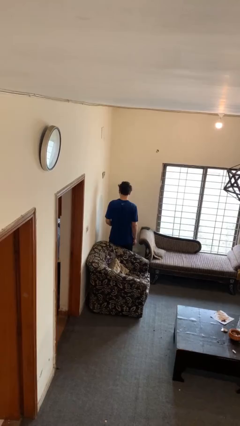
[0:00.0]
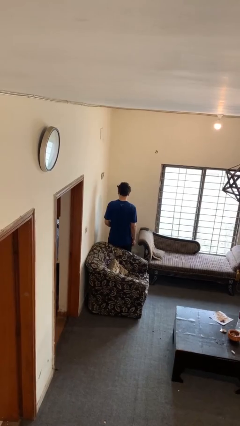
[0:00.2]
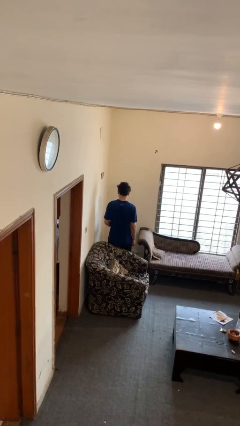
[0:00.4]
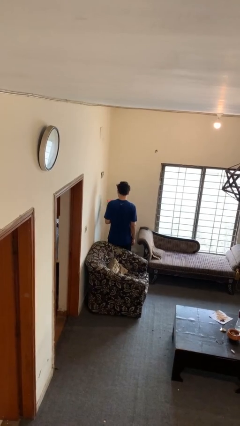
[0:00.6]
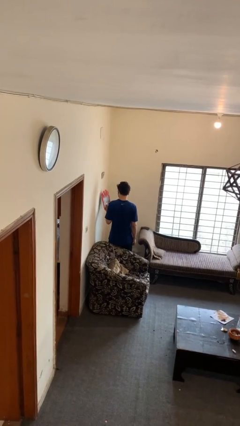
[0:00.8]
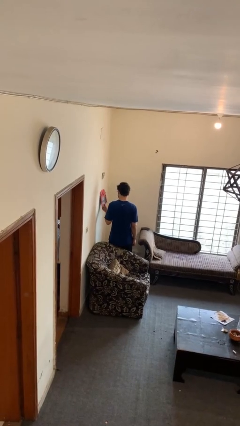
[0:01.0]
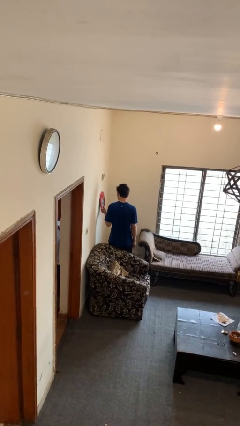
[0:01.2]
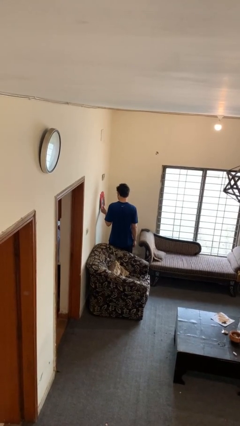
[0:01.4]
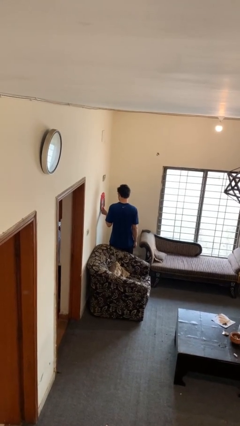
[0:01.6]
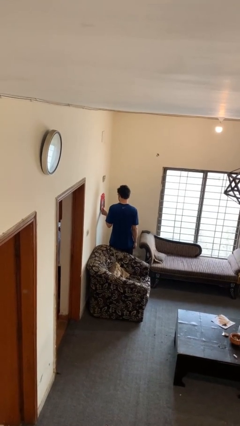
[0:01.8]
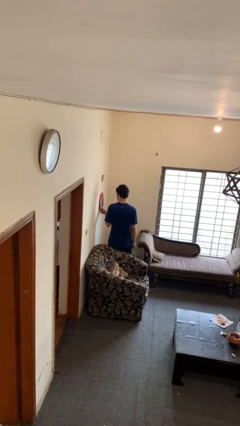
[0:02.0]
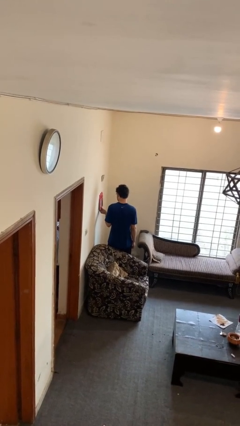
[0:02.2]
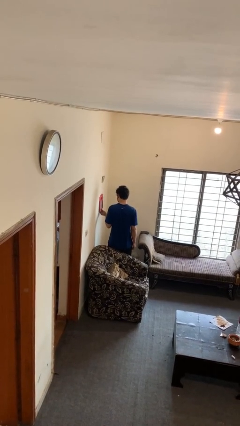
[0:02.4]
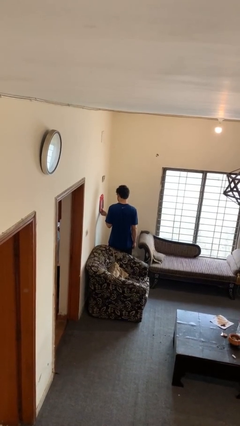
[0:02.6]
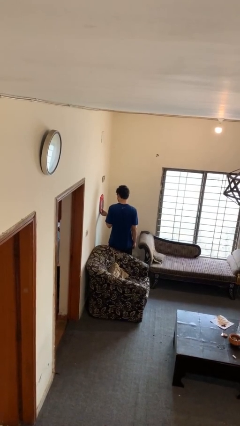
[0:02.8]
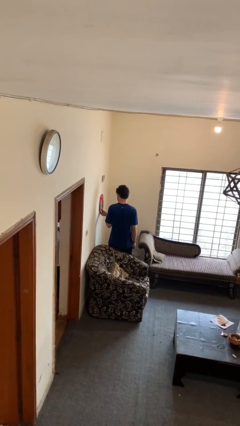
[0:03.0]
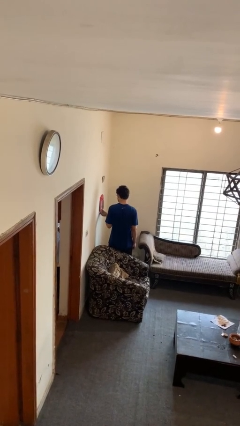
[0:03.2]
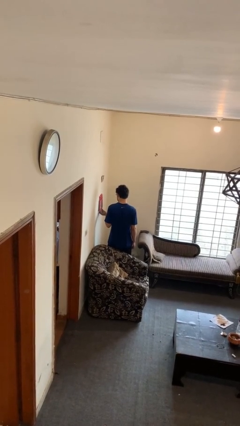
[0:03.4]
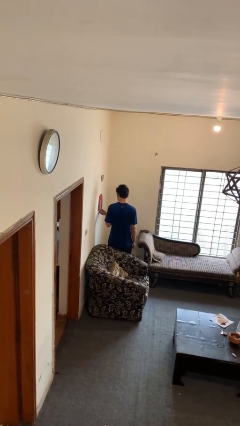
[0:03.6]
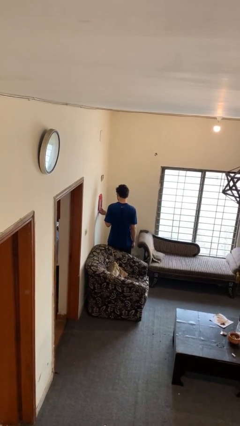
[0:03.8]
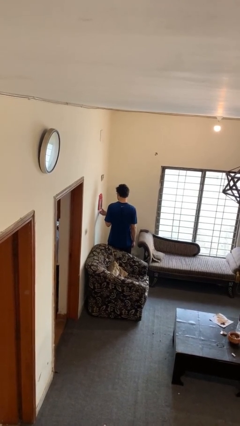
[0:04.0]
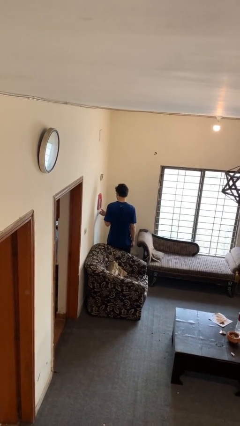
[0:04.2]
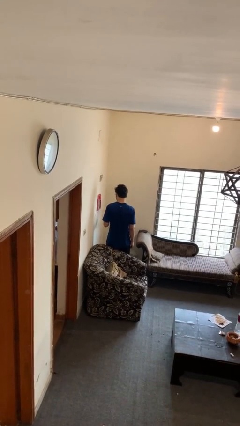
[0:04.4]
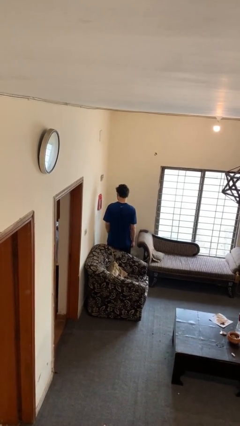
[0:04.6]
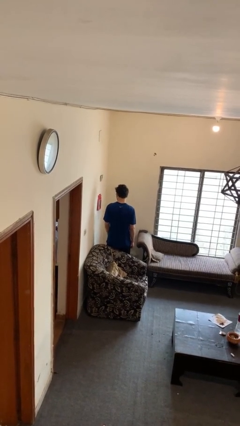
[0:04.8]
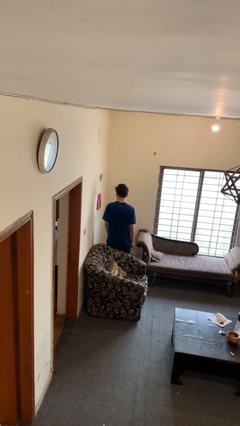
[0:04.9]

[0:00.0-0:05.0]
person puts up picture frame

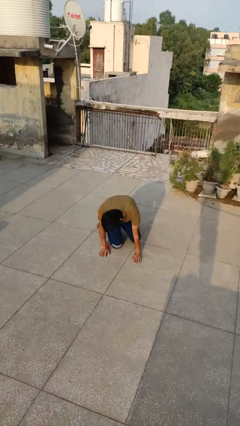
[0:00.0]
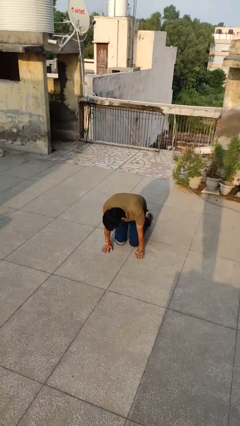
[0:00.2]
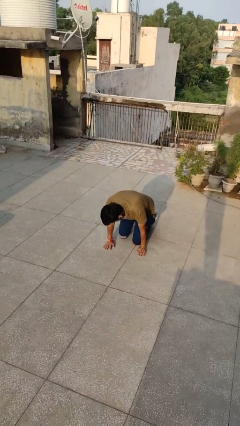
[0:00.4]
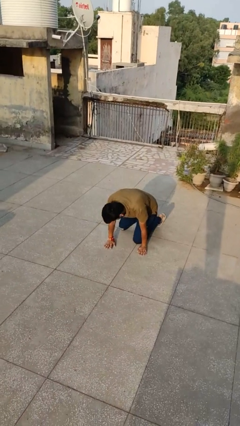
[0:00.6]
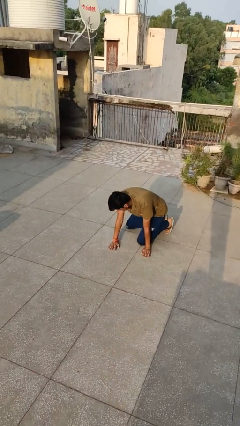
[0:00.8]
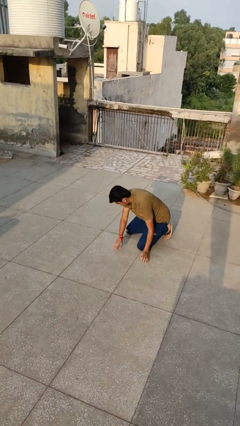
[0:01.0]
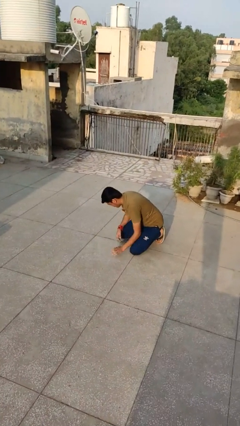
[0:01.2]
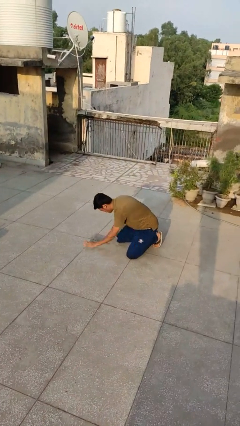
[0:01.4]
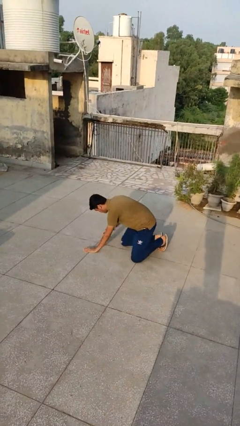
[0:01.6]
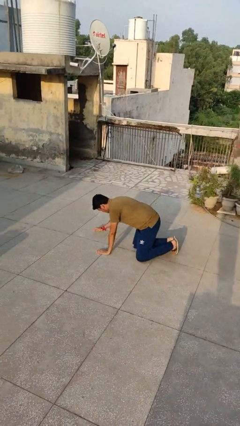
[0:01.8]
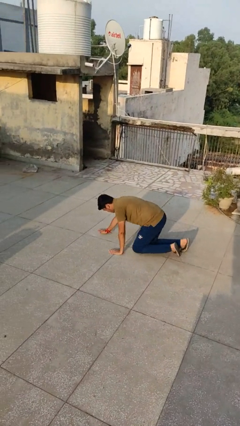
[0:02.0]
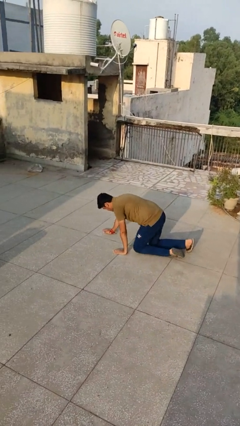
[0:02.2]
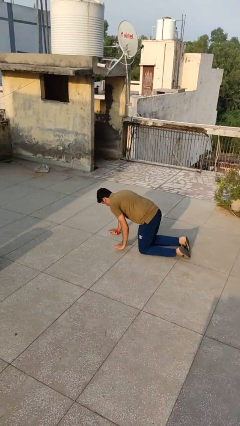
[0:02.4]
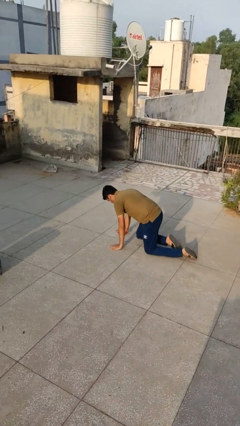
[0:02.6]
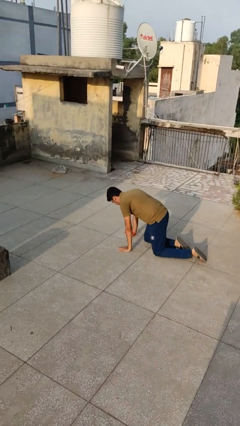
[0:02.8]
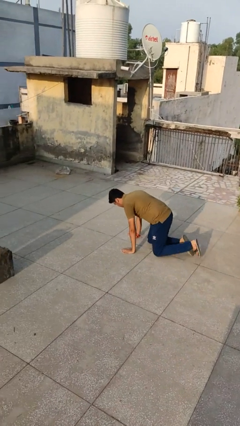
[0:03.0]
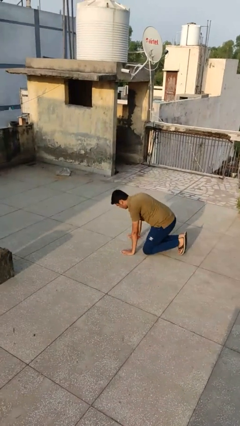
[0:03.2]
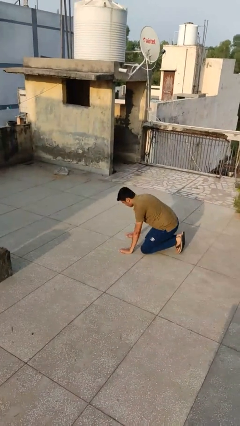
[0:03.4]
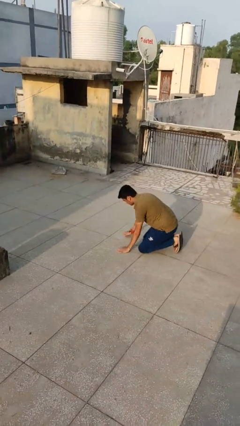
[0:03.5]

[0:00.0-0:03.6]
person crawls

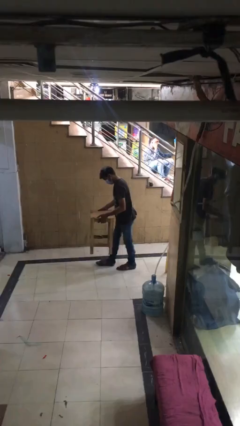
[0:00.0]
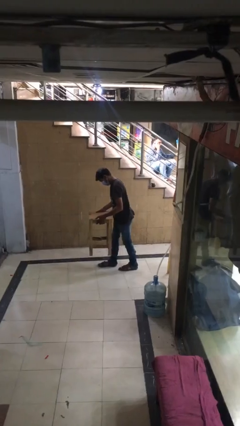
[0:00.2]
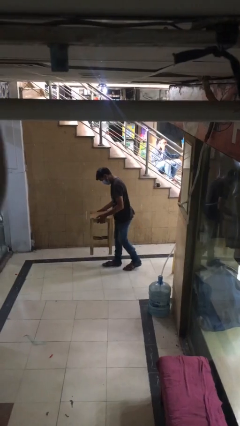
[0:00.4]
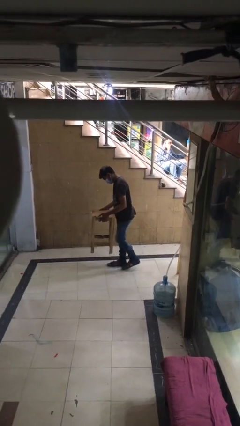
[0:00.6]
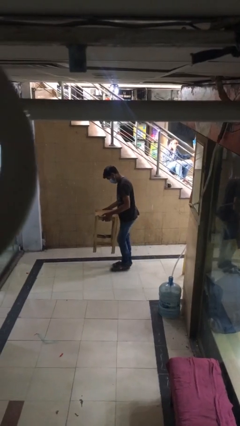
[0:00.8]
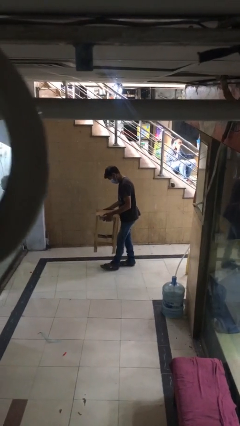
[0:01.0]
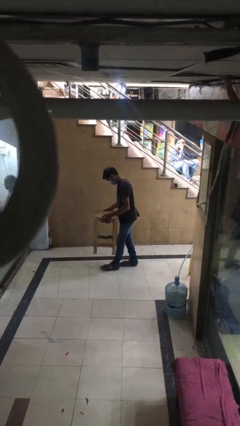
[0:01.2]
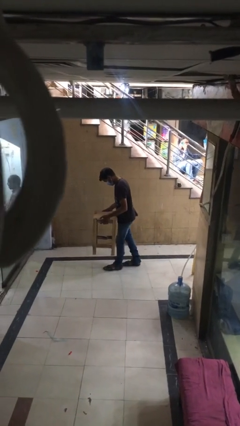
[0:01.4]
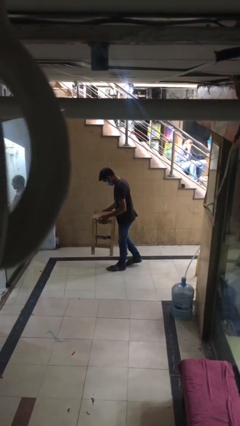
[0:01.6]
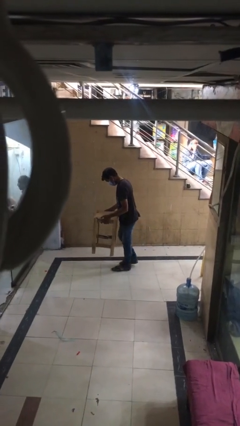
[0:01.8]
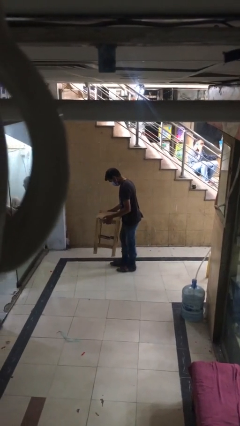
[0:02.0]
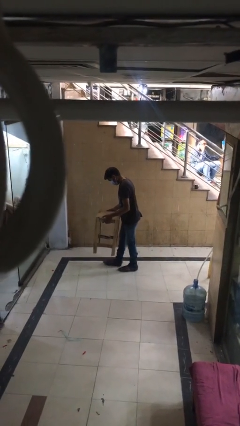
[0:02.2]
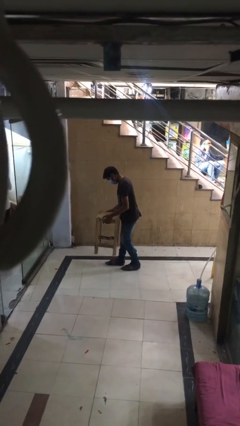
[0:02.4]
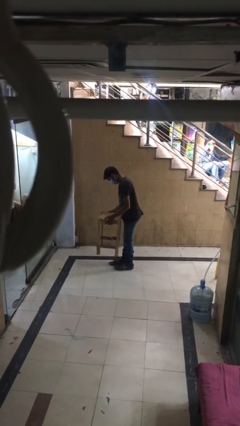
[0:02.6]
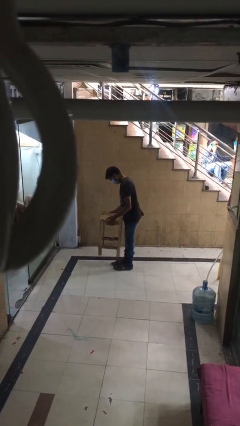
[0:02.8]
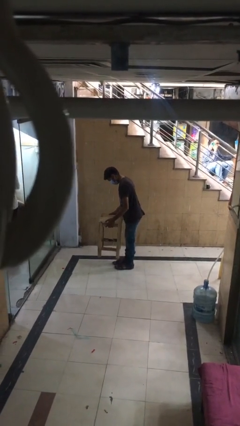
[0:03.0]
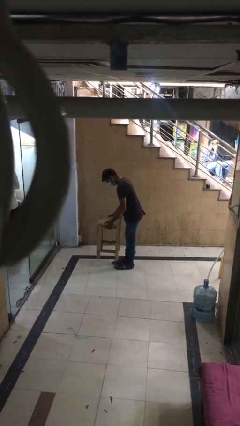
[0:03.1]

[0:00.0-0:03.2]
person carries heavy object

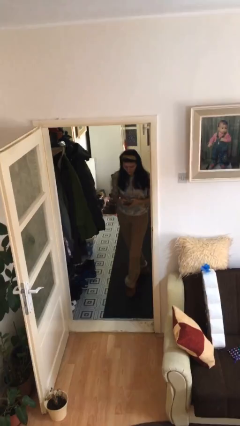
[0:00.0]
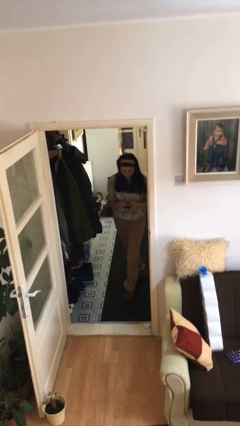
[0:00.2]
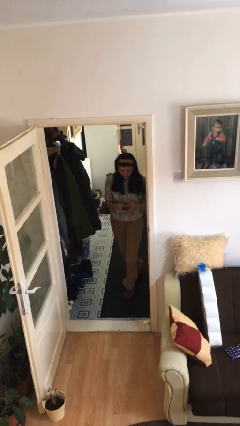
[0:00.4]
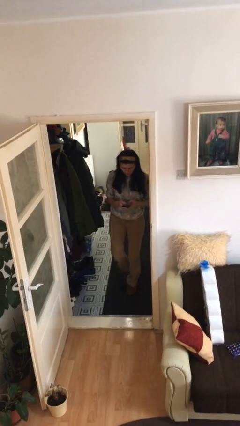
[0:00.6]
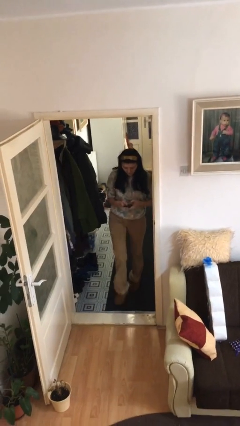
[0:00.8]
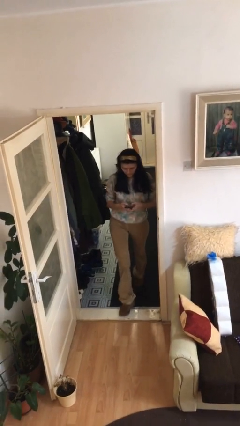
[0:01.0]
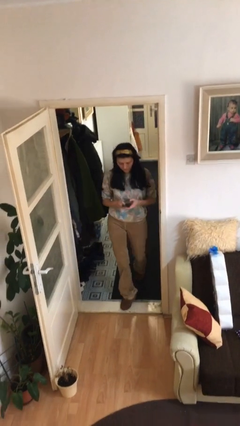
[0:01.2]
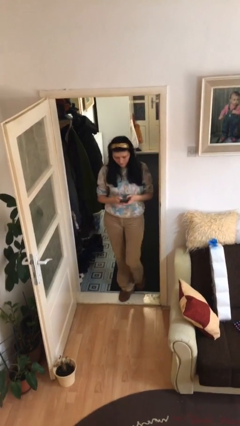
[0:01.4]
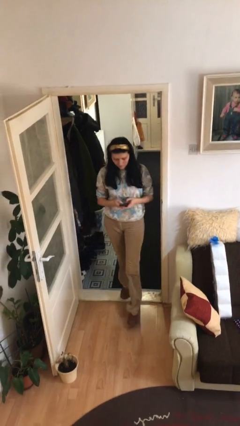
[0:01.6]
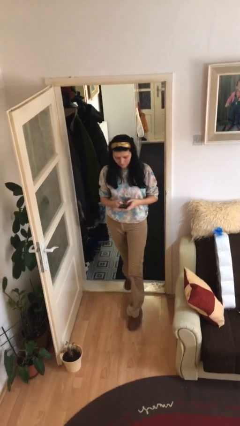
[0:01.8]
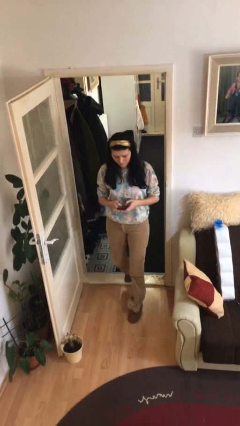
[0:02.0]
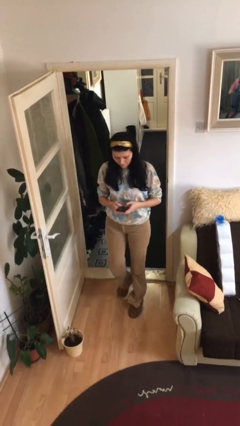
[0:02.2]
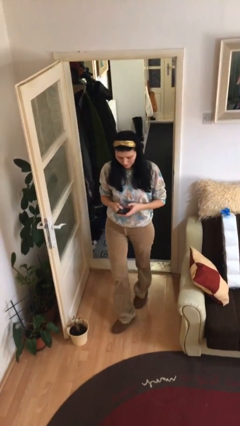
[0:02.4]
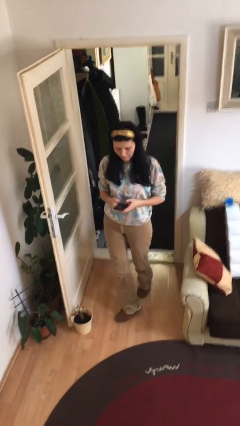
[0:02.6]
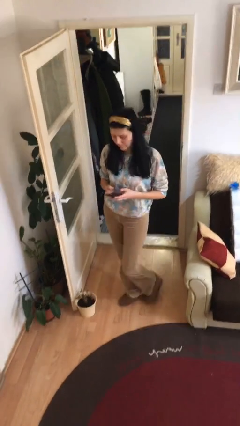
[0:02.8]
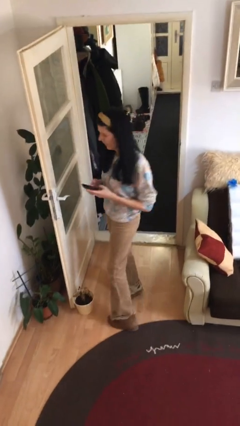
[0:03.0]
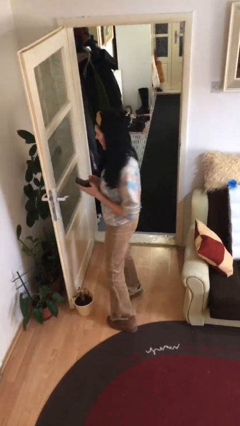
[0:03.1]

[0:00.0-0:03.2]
person enters scene through structure

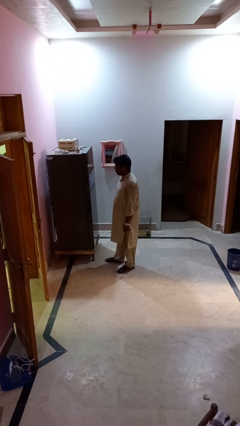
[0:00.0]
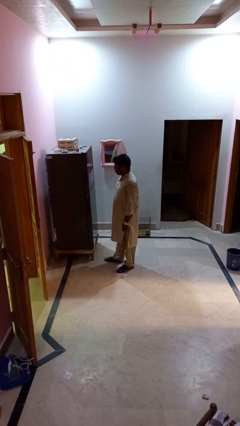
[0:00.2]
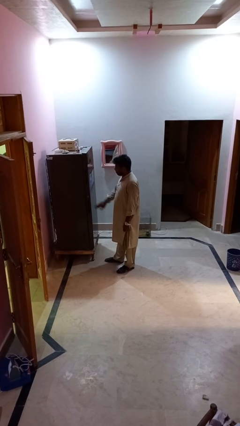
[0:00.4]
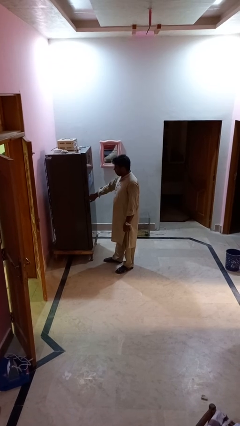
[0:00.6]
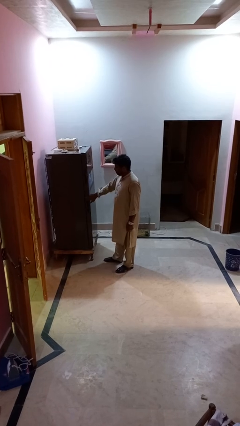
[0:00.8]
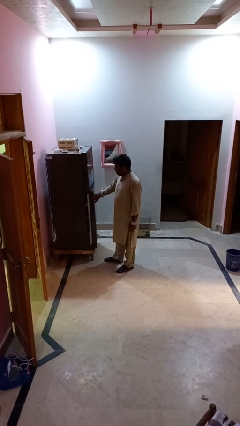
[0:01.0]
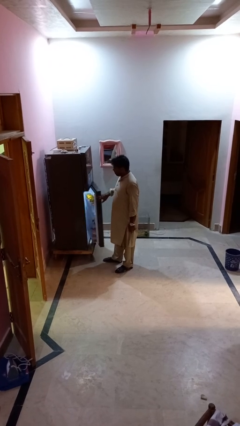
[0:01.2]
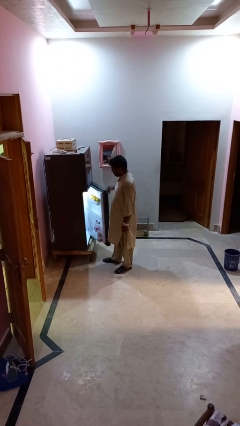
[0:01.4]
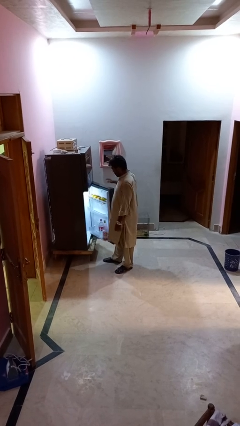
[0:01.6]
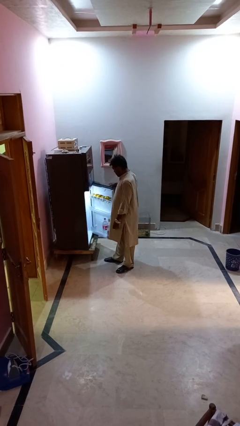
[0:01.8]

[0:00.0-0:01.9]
person opens refrigerator

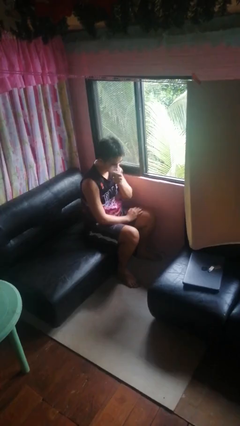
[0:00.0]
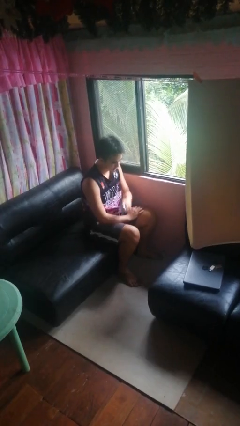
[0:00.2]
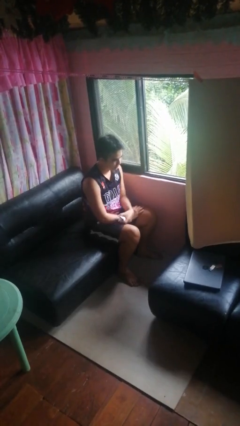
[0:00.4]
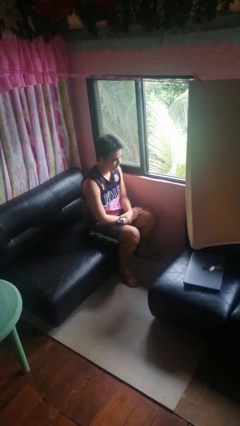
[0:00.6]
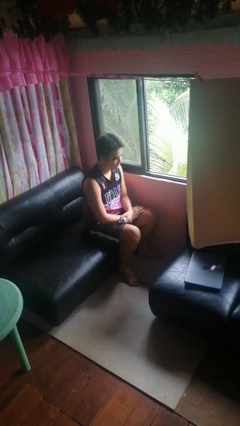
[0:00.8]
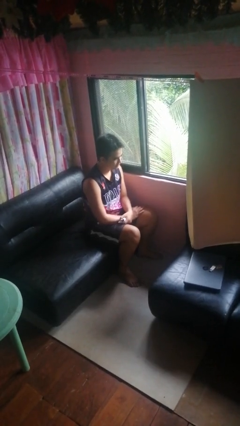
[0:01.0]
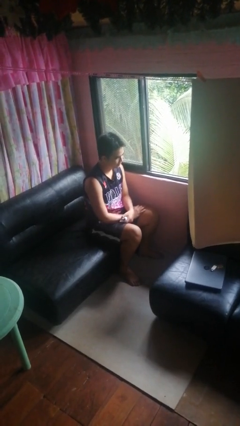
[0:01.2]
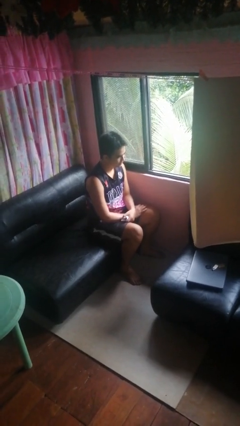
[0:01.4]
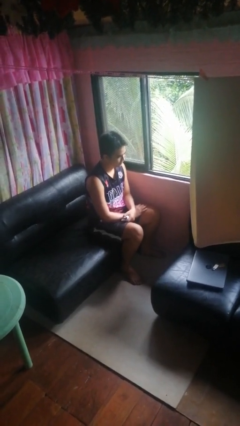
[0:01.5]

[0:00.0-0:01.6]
person blows nose
